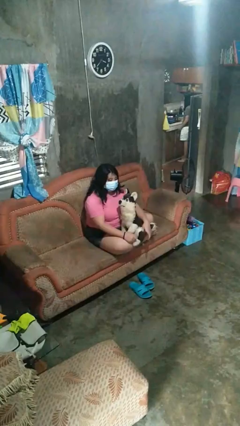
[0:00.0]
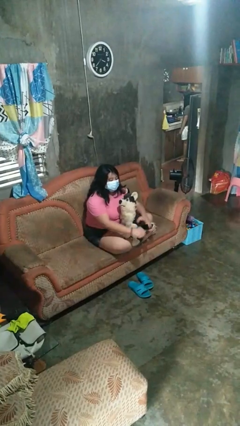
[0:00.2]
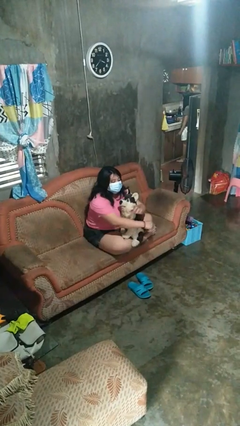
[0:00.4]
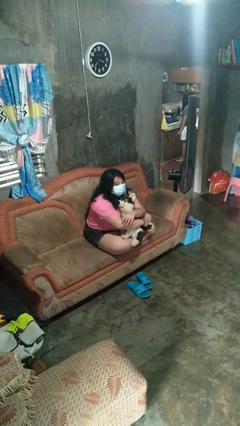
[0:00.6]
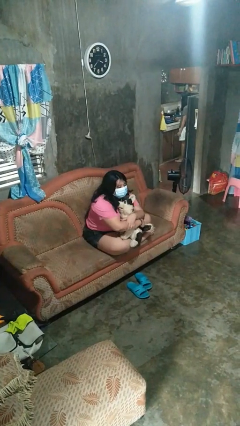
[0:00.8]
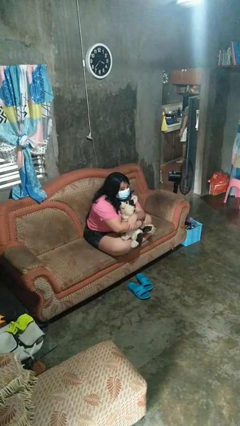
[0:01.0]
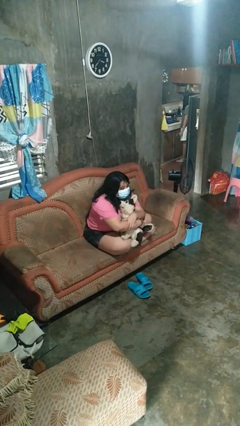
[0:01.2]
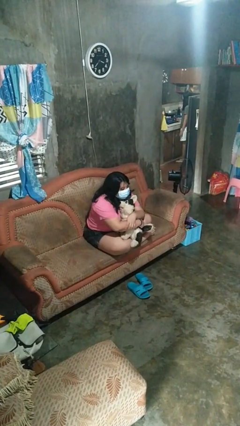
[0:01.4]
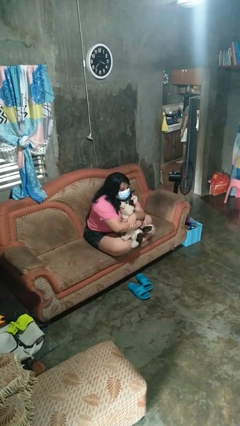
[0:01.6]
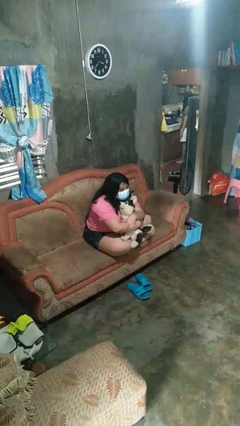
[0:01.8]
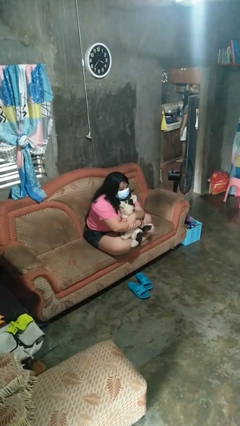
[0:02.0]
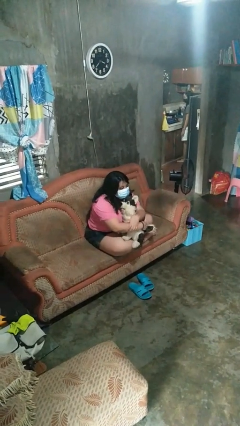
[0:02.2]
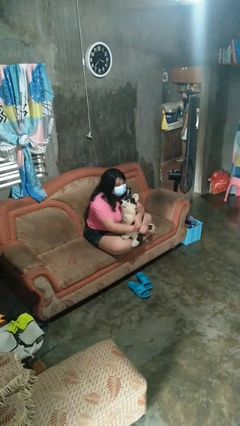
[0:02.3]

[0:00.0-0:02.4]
person hugs stuffed animal

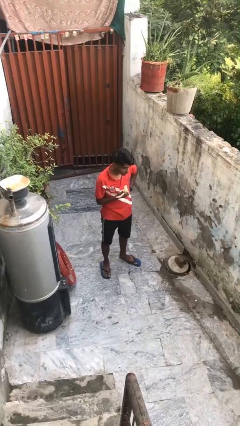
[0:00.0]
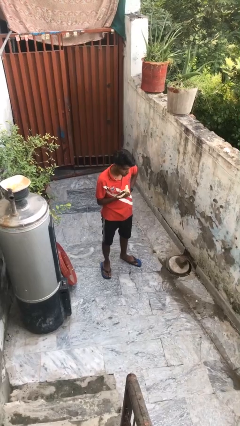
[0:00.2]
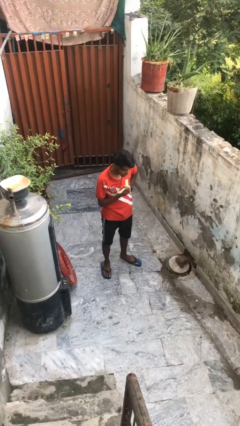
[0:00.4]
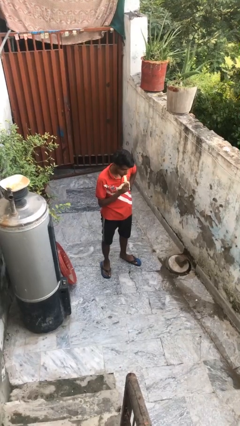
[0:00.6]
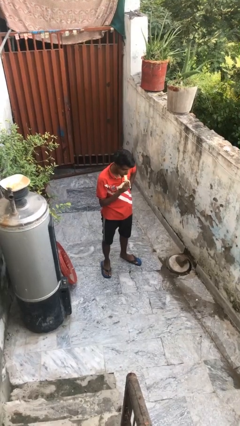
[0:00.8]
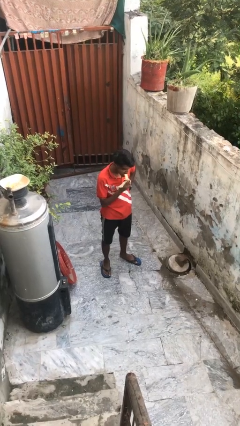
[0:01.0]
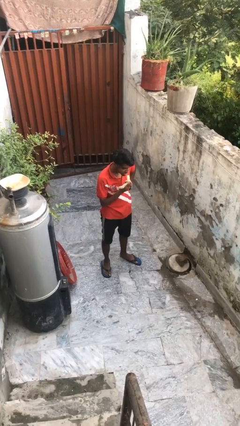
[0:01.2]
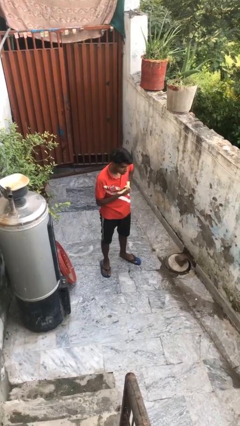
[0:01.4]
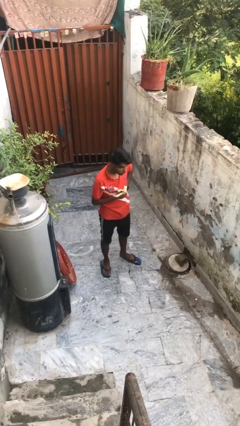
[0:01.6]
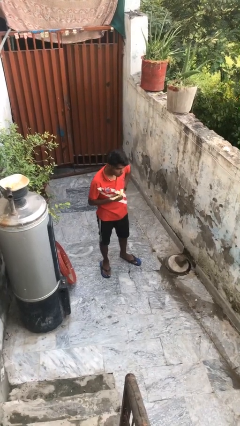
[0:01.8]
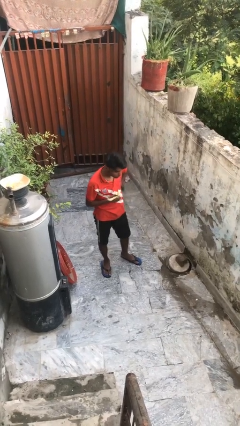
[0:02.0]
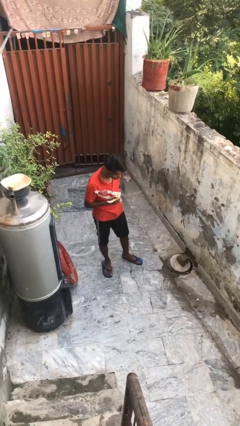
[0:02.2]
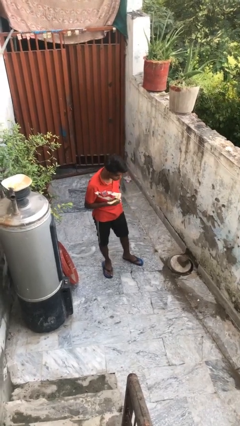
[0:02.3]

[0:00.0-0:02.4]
person eats banana

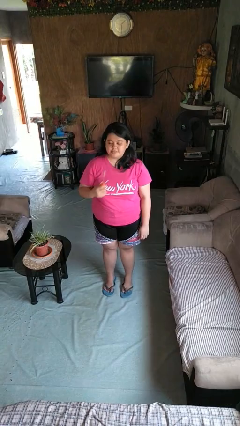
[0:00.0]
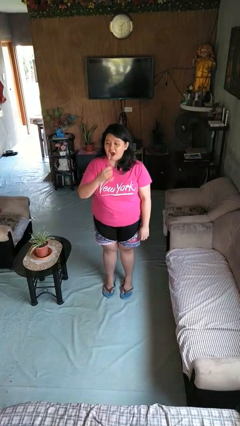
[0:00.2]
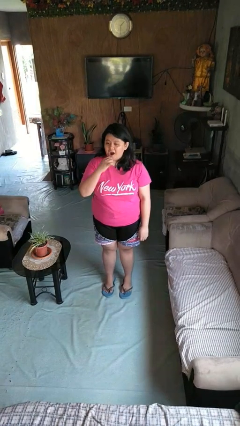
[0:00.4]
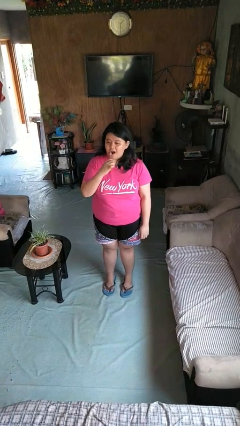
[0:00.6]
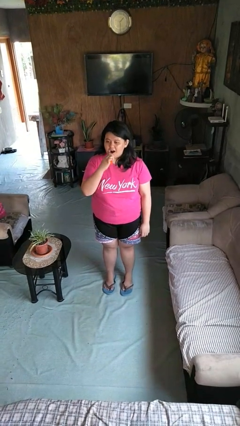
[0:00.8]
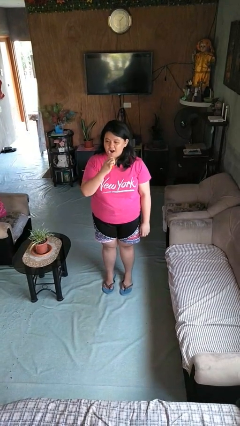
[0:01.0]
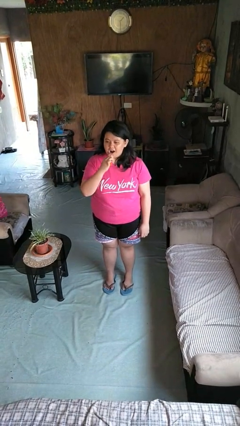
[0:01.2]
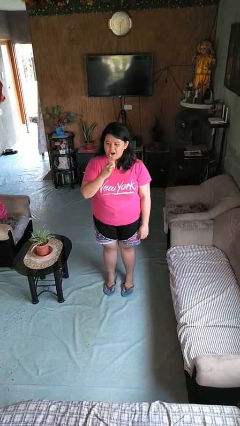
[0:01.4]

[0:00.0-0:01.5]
person brushes teeth

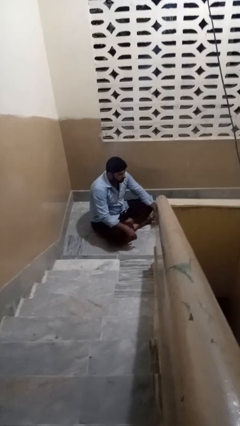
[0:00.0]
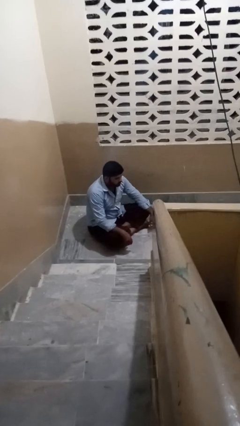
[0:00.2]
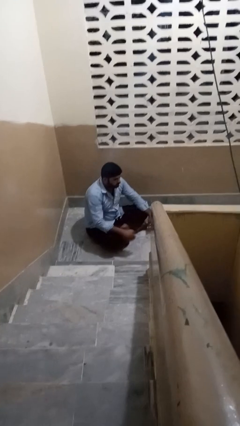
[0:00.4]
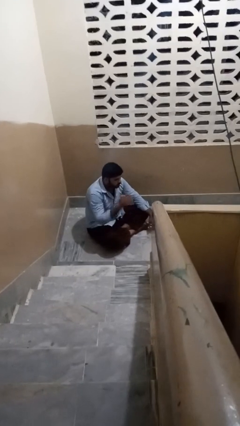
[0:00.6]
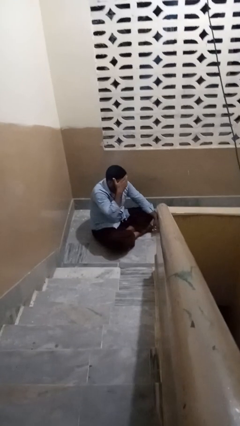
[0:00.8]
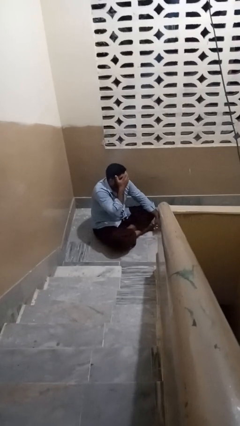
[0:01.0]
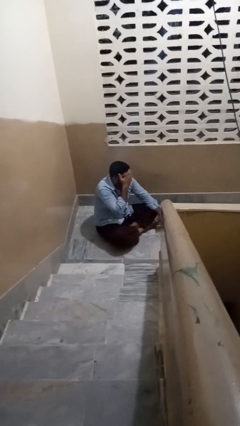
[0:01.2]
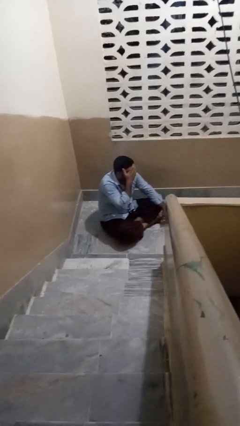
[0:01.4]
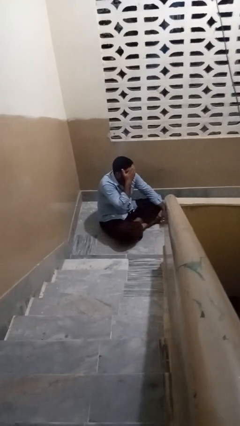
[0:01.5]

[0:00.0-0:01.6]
person covers face with hands

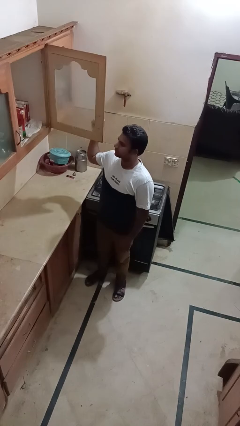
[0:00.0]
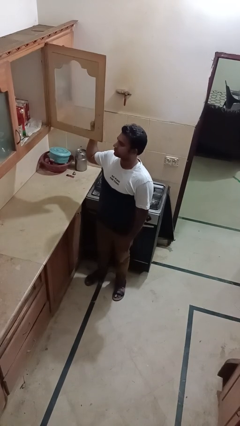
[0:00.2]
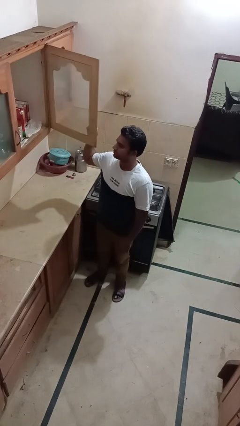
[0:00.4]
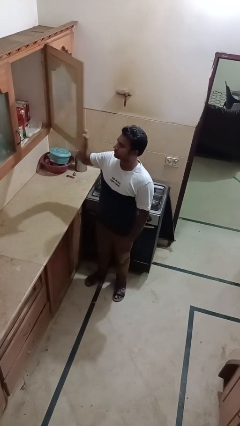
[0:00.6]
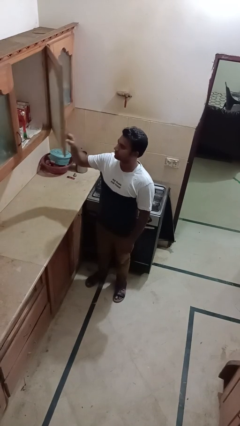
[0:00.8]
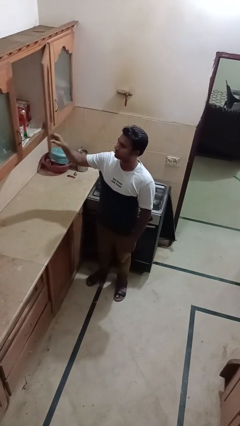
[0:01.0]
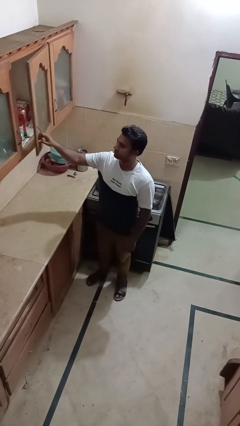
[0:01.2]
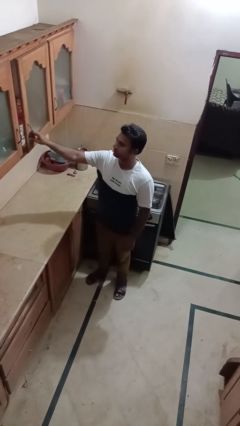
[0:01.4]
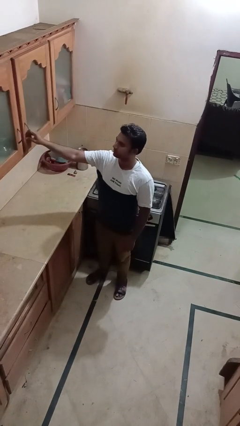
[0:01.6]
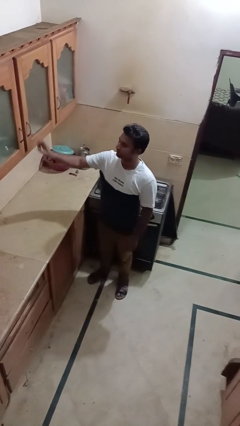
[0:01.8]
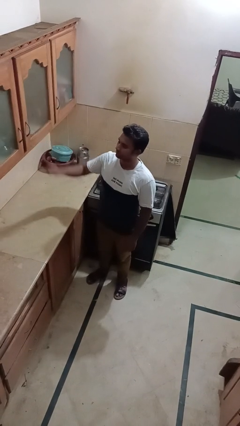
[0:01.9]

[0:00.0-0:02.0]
person closes cabinet

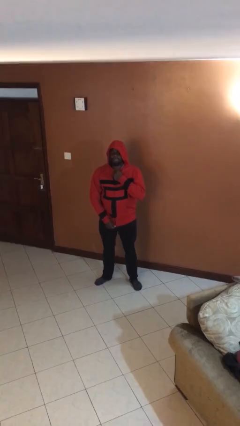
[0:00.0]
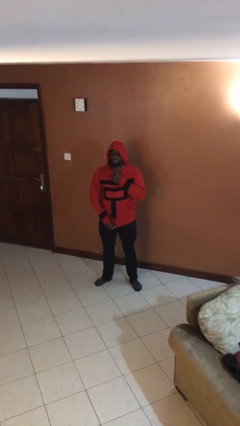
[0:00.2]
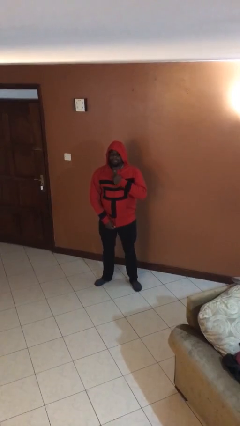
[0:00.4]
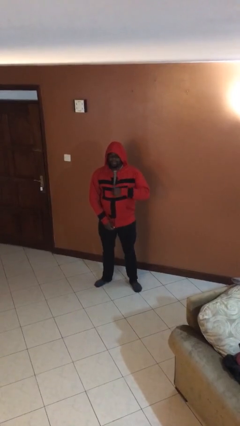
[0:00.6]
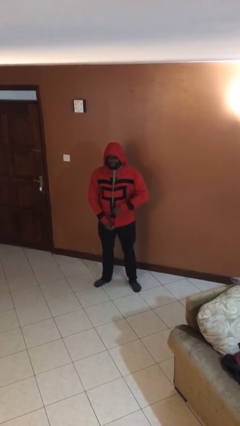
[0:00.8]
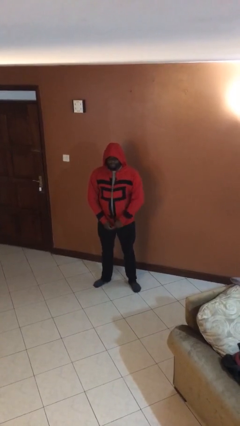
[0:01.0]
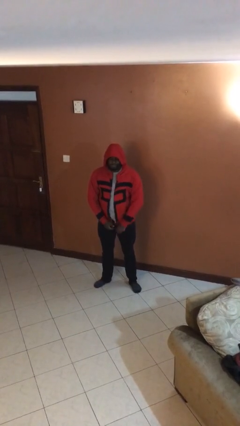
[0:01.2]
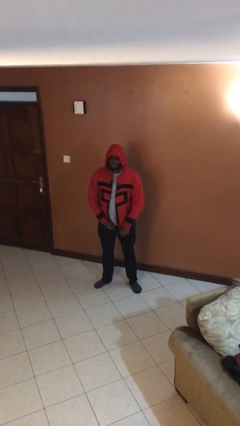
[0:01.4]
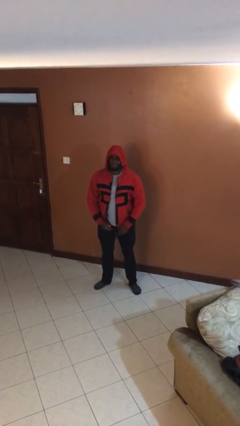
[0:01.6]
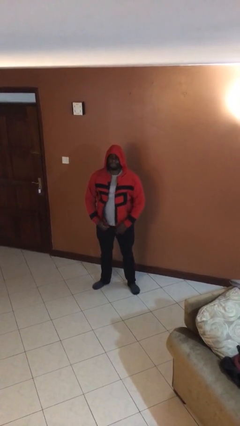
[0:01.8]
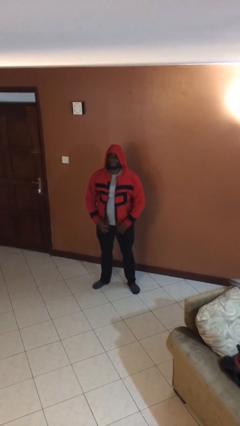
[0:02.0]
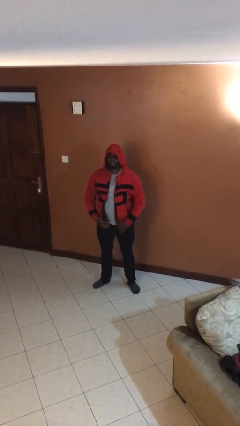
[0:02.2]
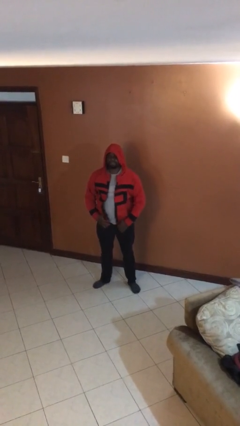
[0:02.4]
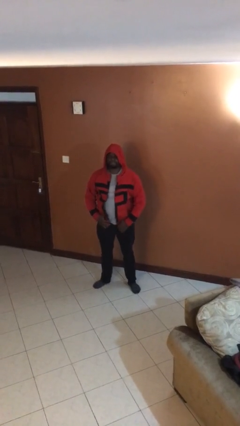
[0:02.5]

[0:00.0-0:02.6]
person unzips jacket

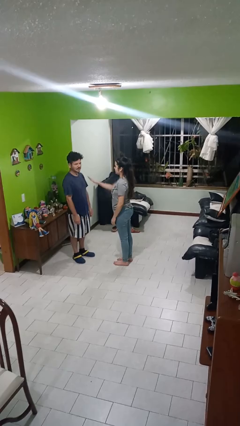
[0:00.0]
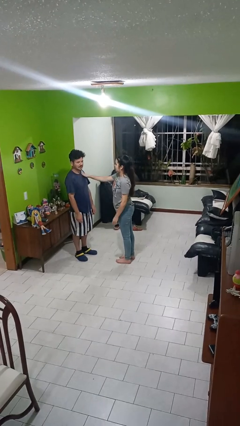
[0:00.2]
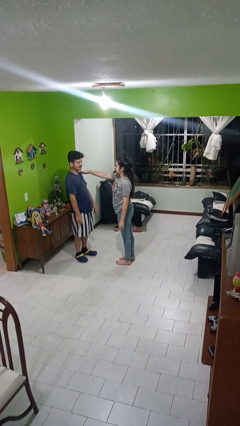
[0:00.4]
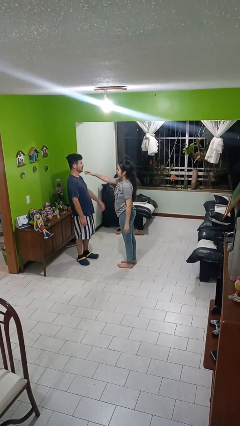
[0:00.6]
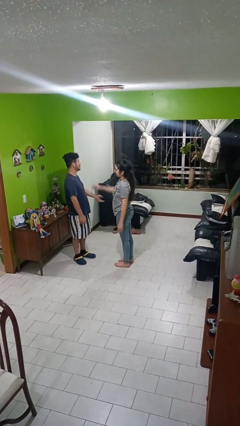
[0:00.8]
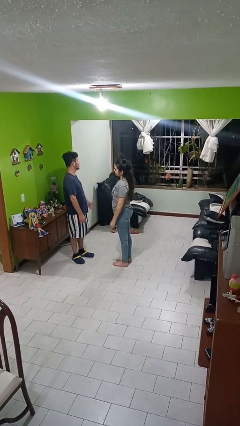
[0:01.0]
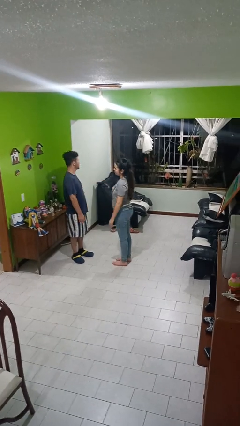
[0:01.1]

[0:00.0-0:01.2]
person shoves person

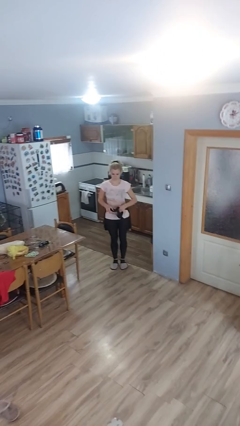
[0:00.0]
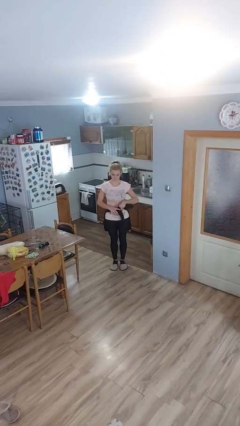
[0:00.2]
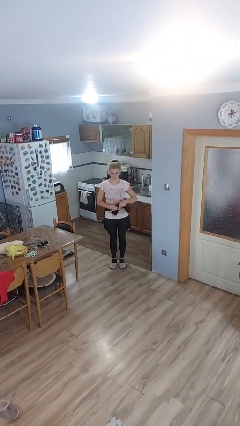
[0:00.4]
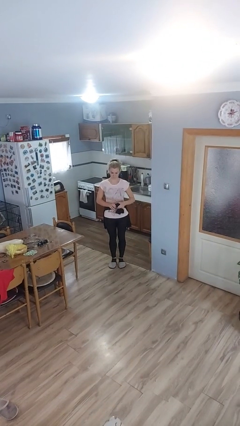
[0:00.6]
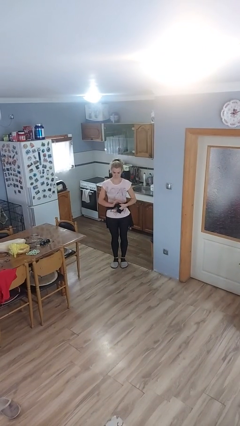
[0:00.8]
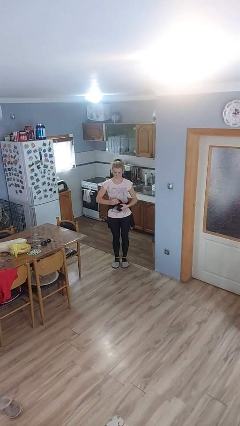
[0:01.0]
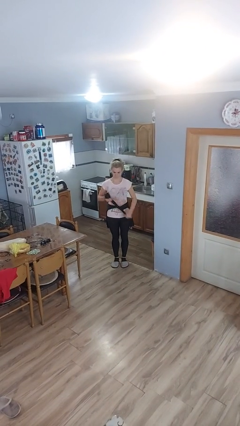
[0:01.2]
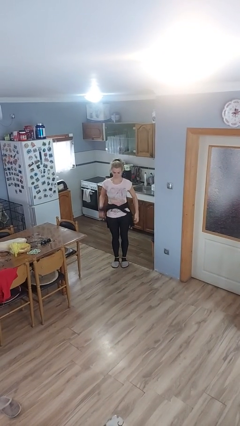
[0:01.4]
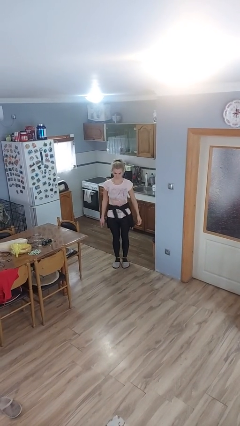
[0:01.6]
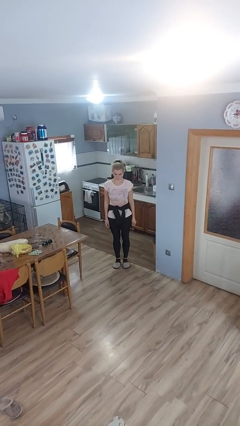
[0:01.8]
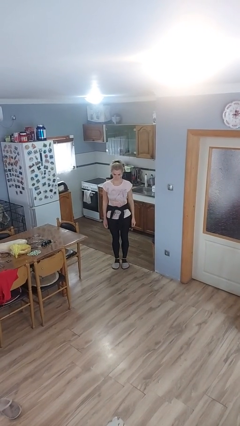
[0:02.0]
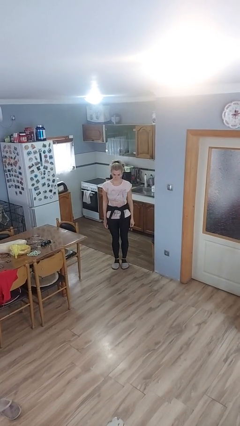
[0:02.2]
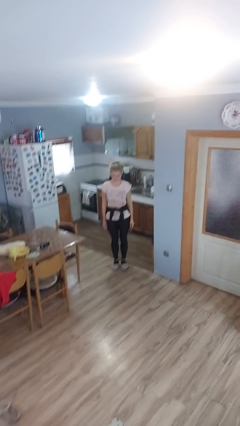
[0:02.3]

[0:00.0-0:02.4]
person ties jacket around waist

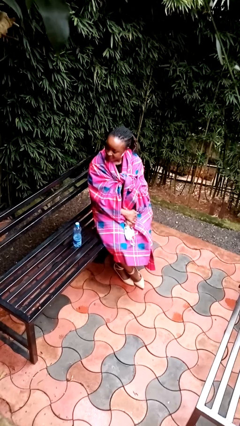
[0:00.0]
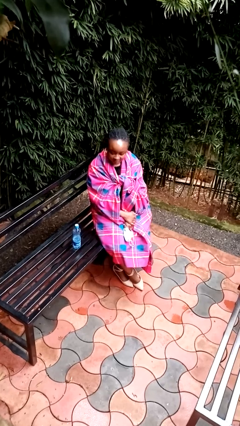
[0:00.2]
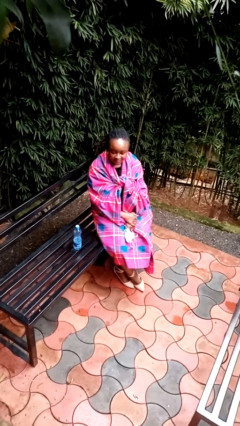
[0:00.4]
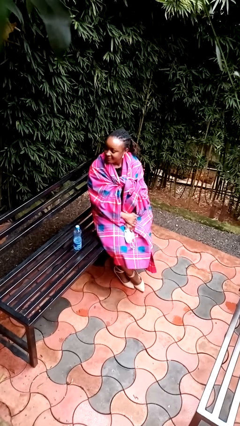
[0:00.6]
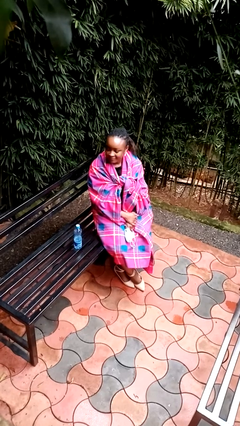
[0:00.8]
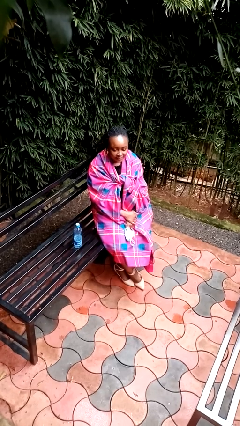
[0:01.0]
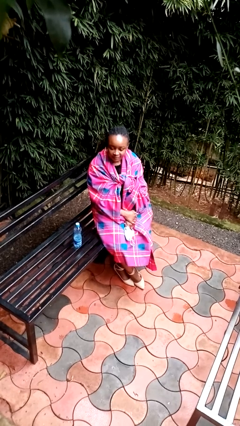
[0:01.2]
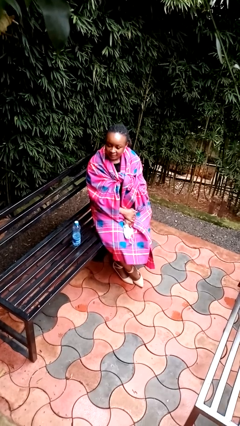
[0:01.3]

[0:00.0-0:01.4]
person shakes head
